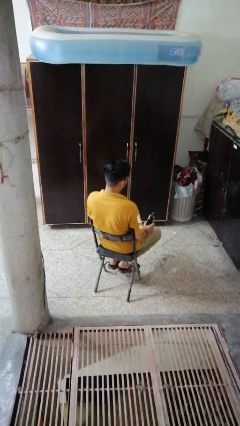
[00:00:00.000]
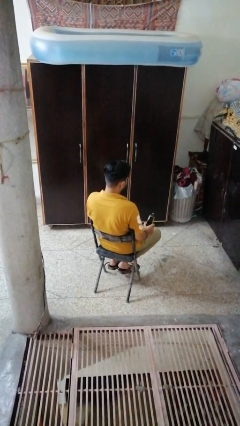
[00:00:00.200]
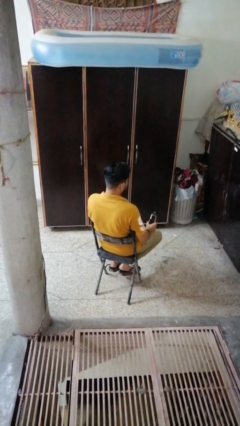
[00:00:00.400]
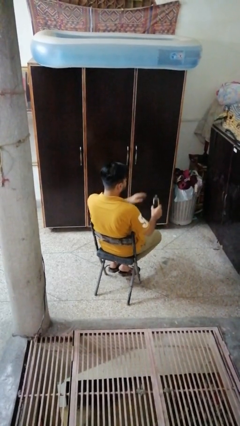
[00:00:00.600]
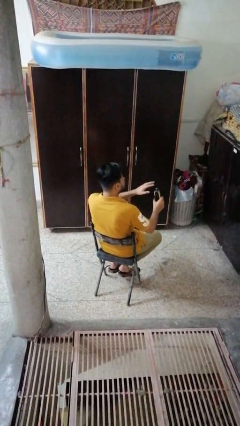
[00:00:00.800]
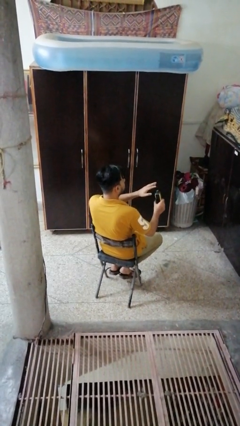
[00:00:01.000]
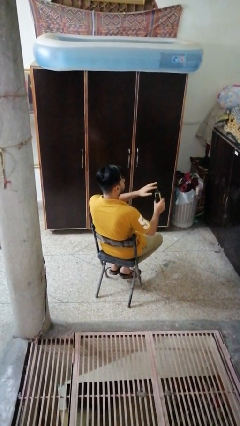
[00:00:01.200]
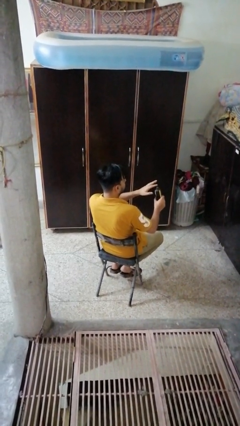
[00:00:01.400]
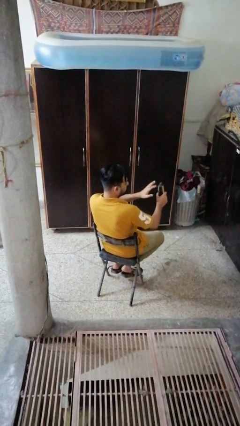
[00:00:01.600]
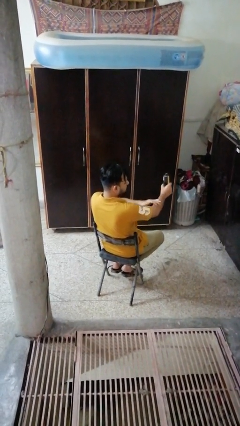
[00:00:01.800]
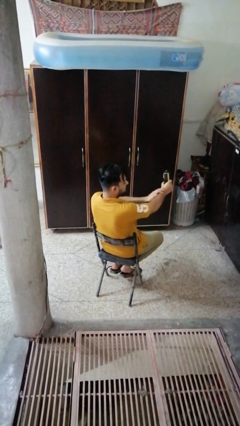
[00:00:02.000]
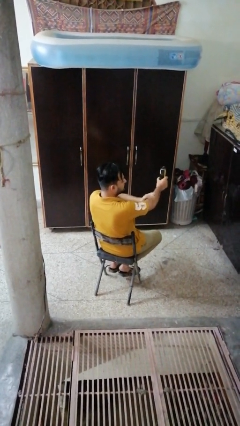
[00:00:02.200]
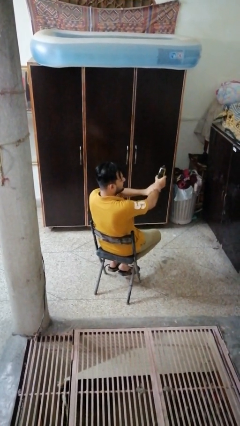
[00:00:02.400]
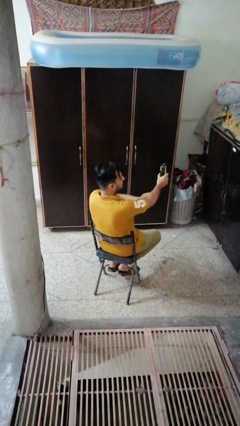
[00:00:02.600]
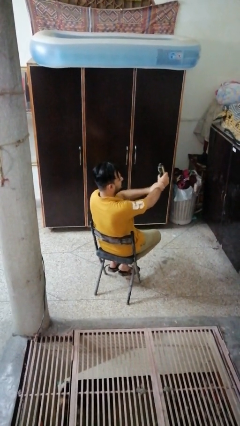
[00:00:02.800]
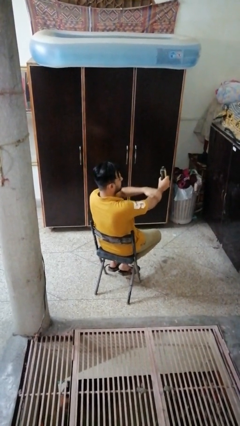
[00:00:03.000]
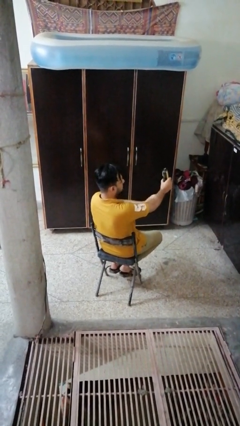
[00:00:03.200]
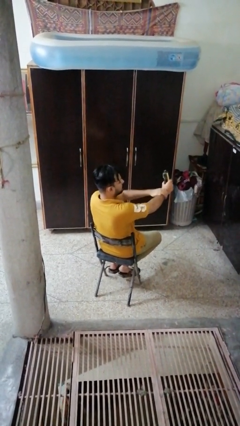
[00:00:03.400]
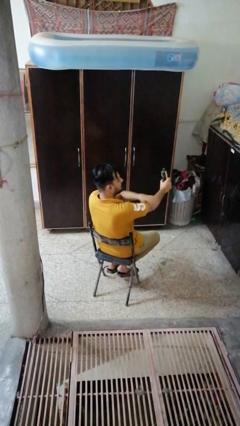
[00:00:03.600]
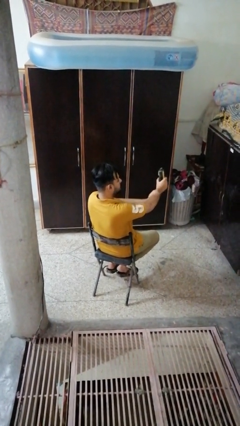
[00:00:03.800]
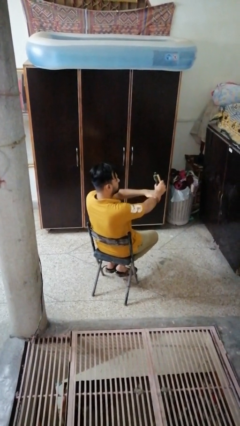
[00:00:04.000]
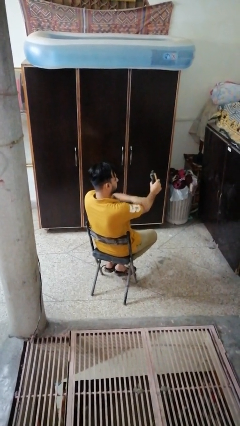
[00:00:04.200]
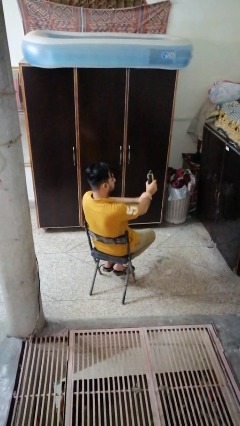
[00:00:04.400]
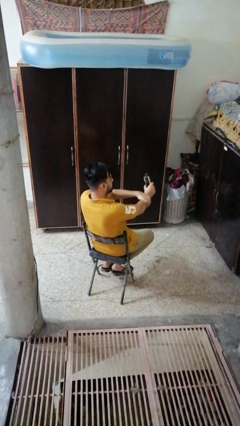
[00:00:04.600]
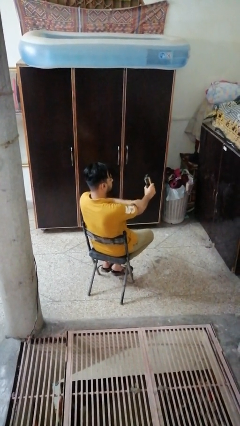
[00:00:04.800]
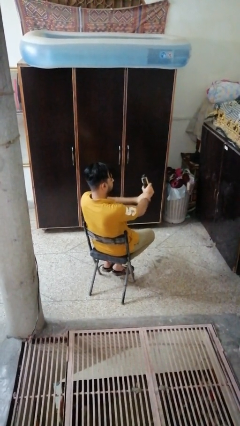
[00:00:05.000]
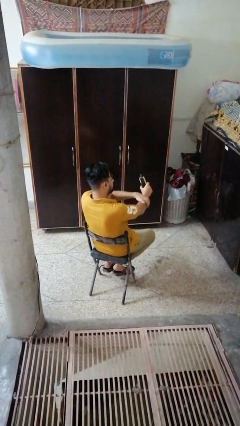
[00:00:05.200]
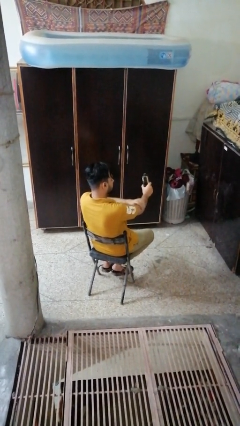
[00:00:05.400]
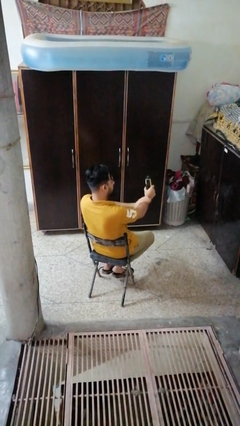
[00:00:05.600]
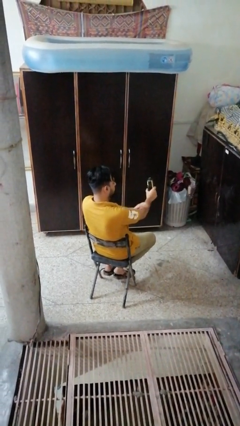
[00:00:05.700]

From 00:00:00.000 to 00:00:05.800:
person applies sunscreen

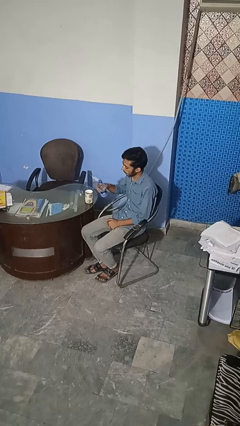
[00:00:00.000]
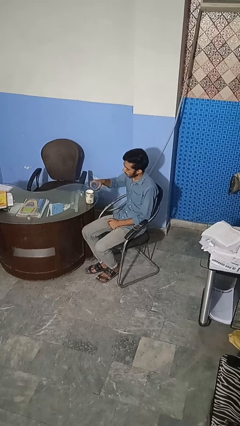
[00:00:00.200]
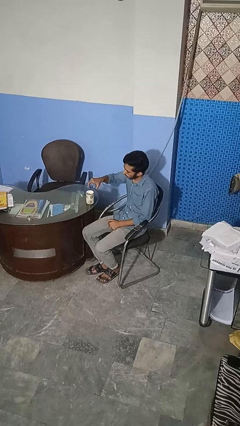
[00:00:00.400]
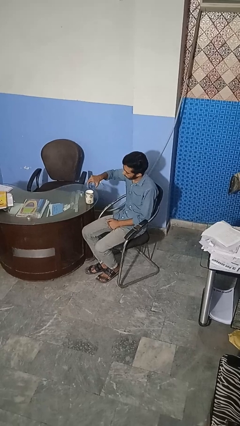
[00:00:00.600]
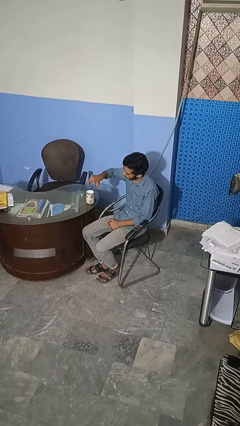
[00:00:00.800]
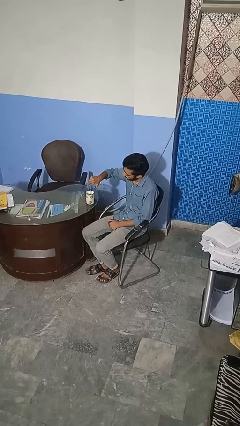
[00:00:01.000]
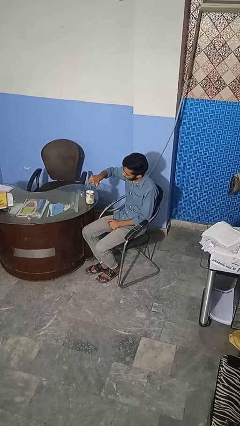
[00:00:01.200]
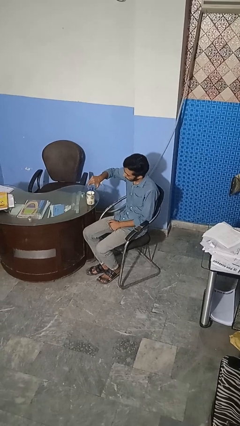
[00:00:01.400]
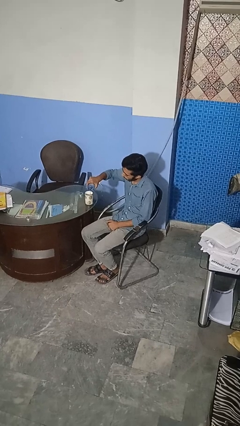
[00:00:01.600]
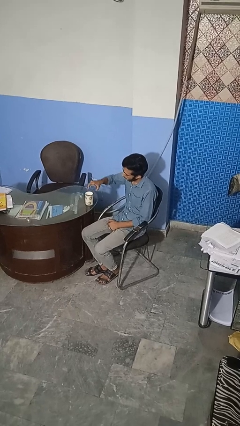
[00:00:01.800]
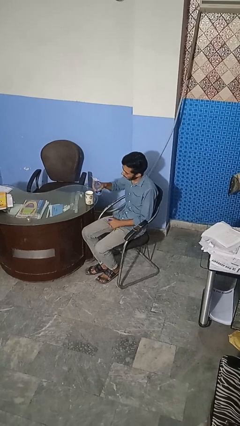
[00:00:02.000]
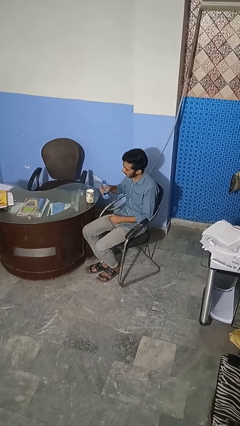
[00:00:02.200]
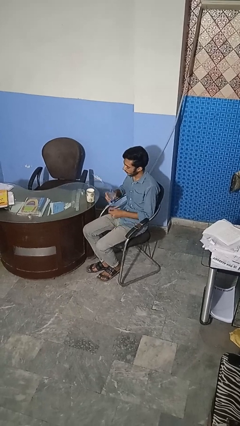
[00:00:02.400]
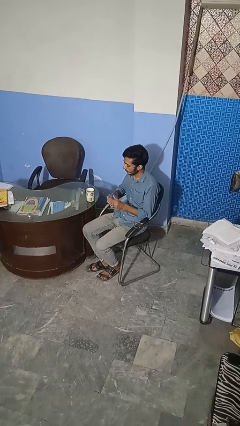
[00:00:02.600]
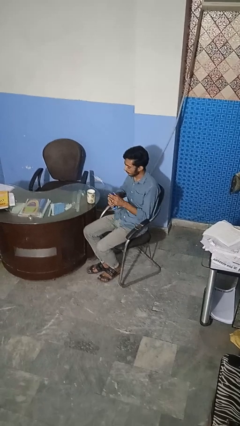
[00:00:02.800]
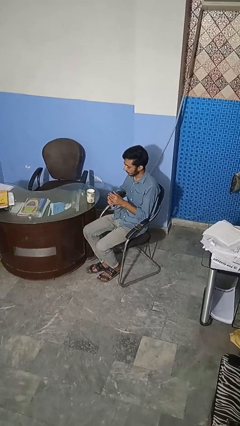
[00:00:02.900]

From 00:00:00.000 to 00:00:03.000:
person pours liquid into cup

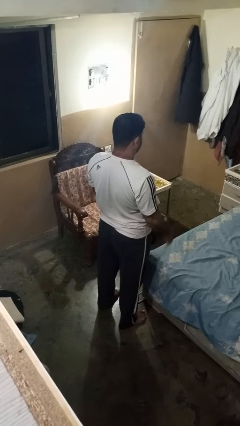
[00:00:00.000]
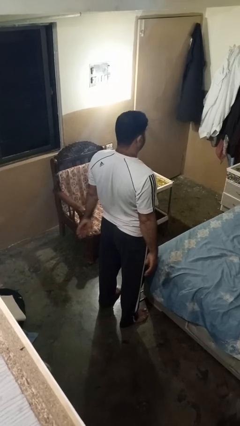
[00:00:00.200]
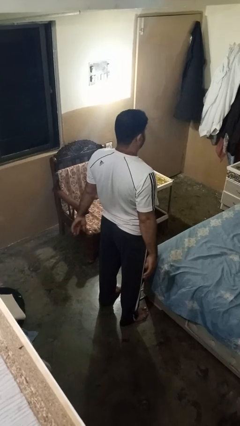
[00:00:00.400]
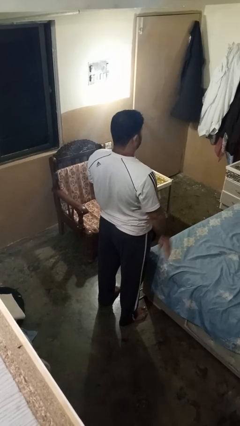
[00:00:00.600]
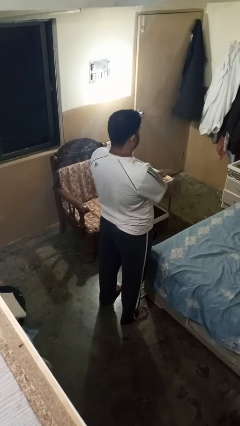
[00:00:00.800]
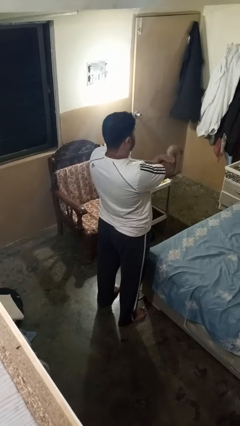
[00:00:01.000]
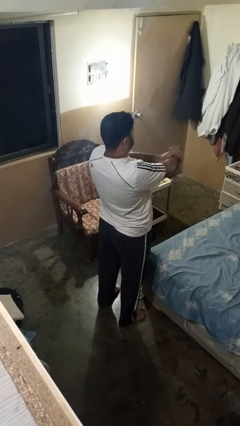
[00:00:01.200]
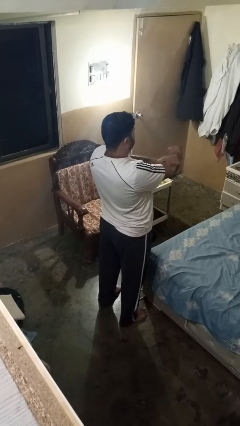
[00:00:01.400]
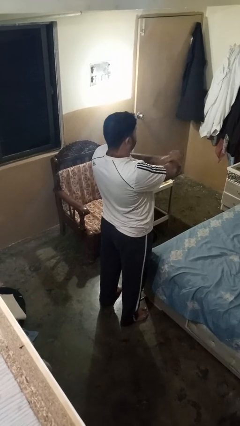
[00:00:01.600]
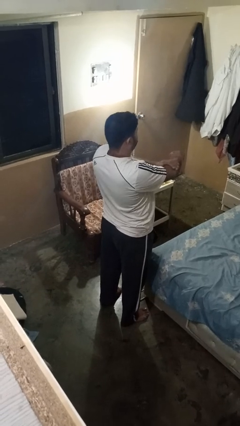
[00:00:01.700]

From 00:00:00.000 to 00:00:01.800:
person swats bug

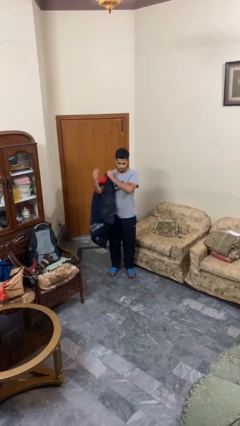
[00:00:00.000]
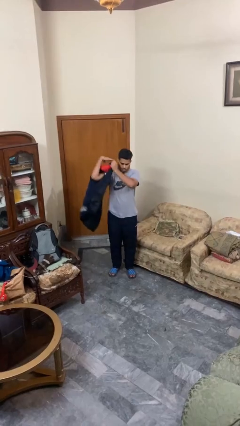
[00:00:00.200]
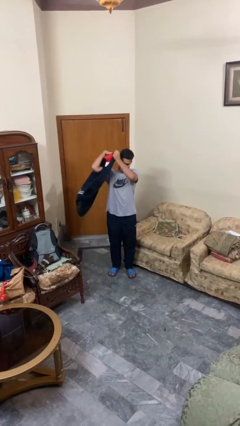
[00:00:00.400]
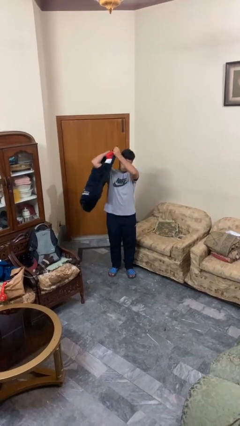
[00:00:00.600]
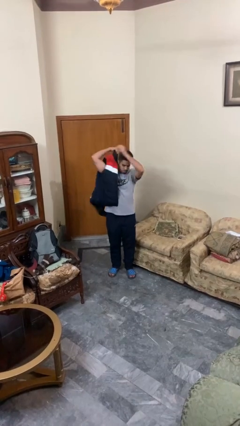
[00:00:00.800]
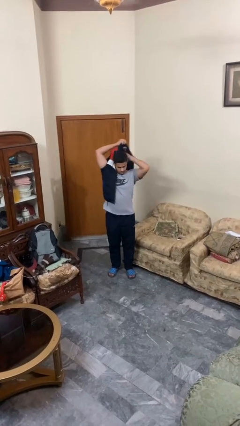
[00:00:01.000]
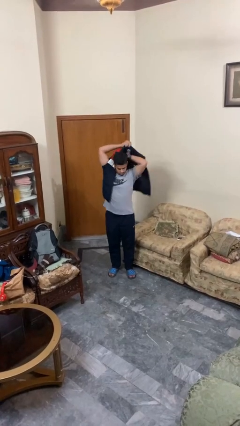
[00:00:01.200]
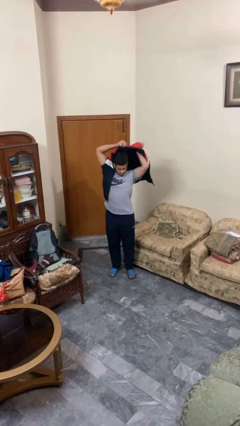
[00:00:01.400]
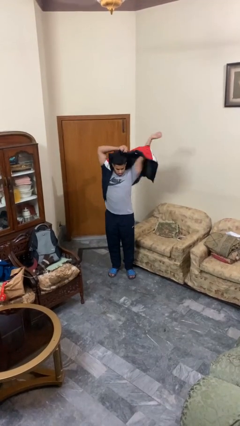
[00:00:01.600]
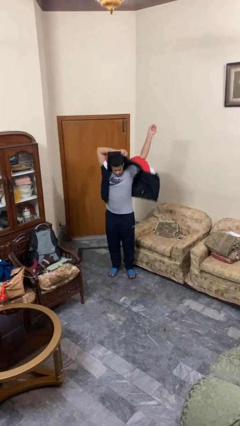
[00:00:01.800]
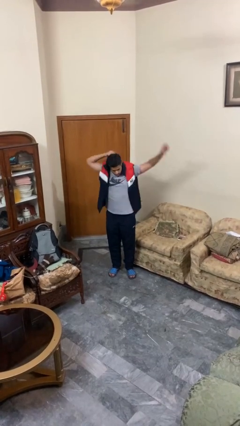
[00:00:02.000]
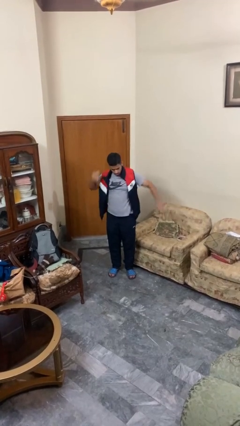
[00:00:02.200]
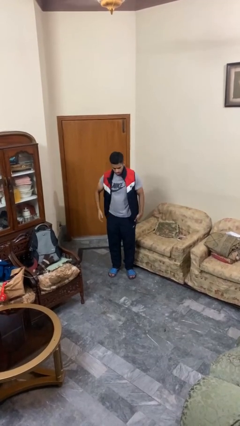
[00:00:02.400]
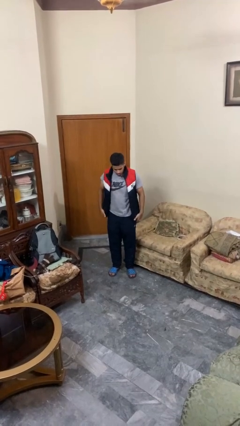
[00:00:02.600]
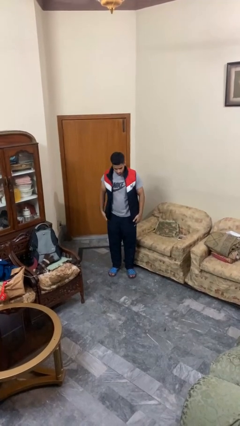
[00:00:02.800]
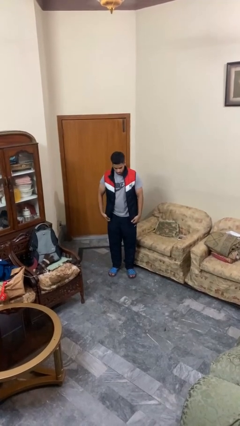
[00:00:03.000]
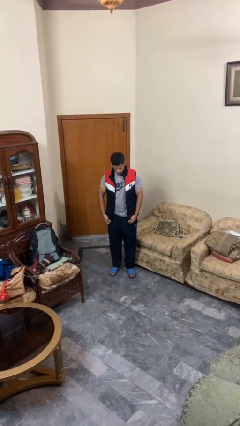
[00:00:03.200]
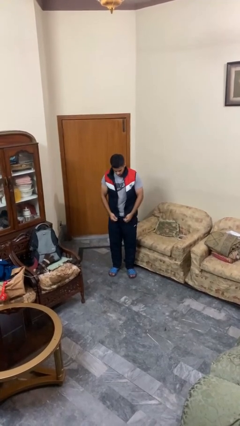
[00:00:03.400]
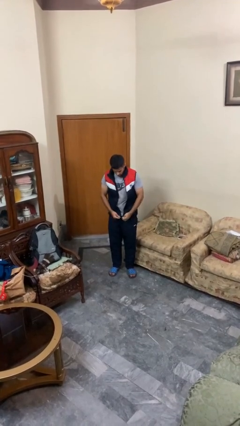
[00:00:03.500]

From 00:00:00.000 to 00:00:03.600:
person puts on jacket

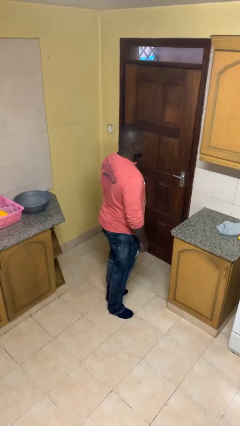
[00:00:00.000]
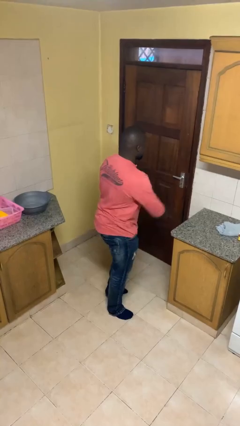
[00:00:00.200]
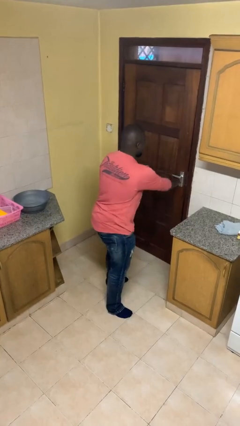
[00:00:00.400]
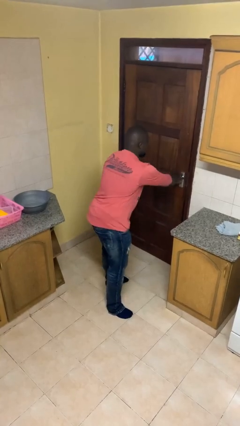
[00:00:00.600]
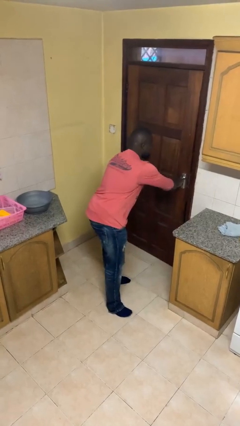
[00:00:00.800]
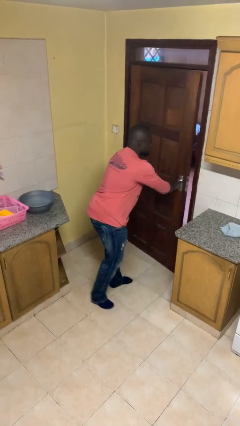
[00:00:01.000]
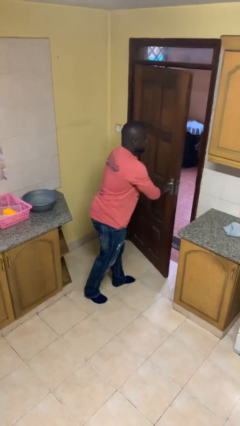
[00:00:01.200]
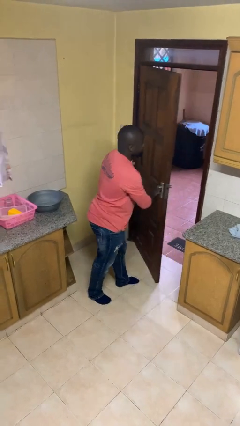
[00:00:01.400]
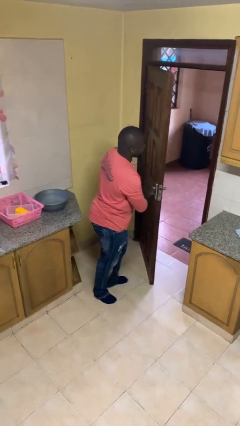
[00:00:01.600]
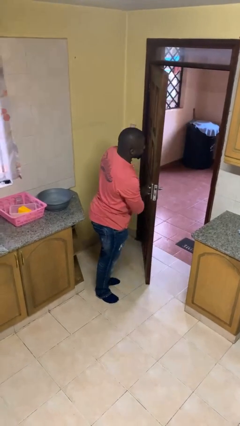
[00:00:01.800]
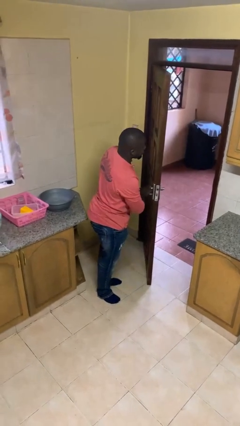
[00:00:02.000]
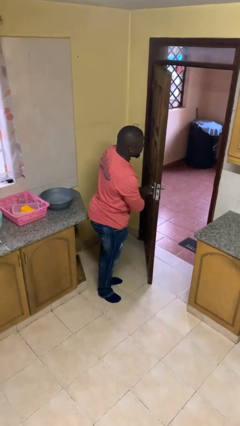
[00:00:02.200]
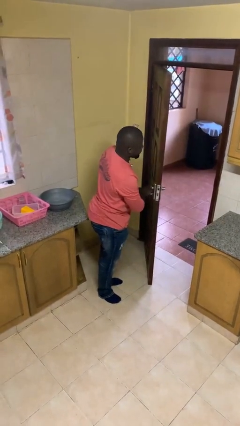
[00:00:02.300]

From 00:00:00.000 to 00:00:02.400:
person opens facility door

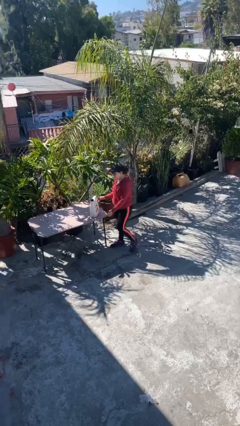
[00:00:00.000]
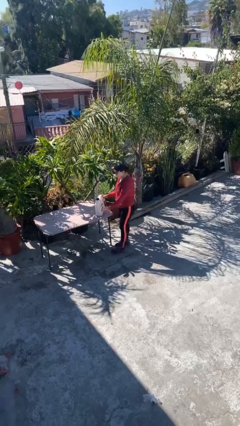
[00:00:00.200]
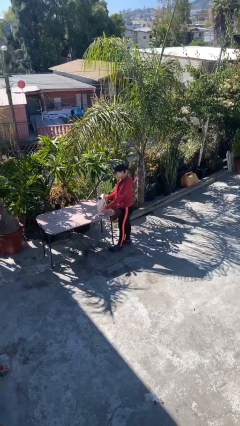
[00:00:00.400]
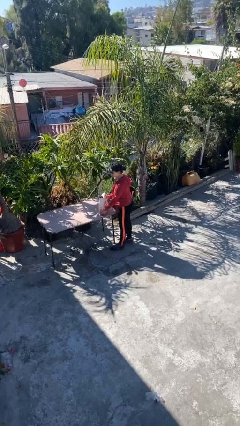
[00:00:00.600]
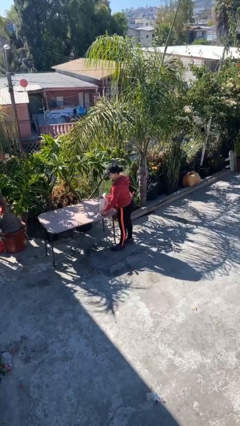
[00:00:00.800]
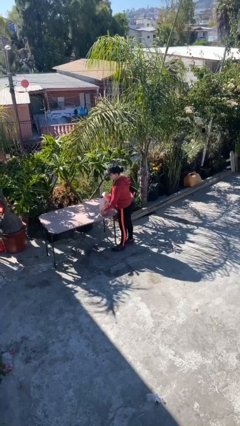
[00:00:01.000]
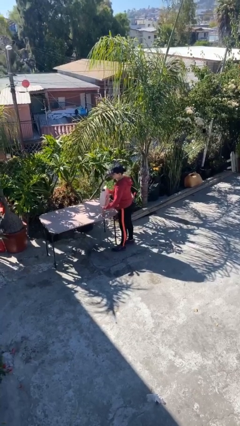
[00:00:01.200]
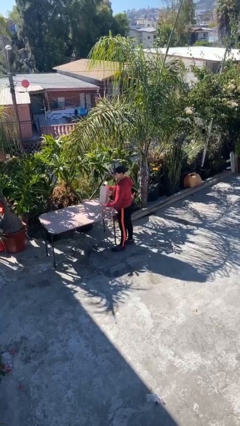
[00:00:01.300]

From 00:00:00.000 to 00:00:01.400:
person picks up object from table
